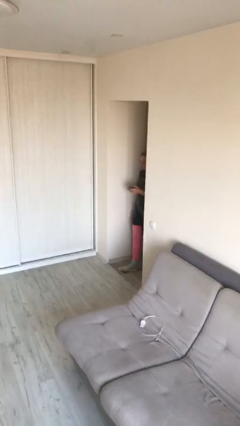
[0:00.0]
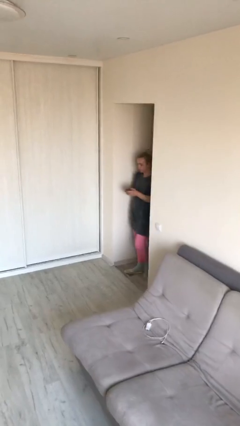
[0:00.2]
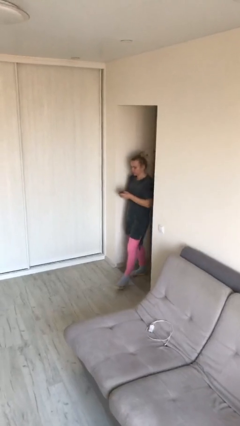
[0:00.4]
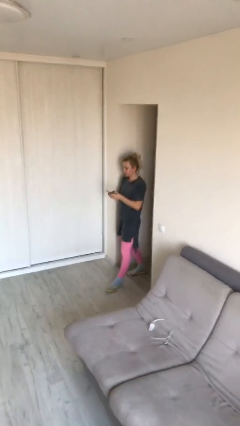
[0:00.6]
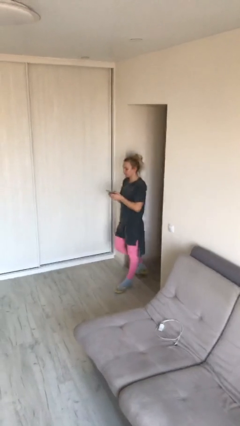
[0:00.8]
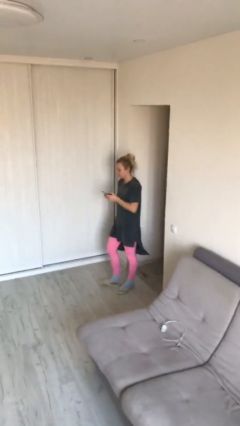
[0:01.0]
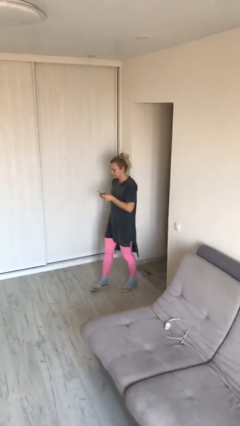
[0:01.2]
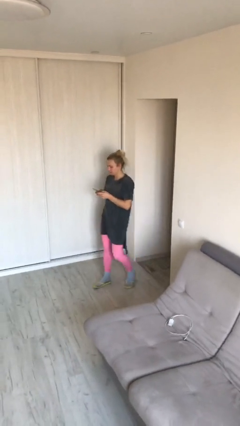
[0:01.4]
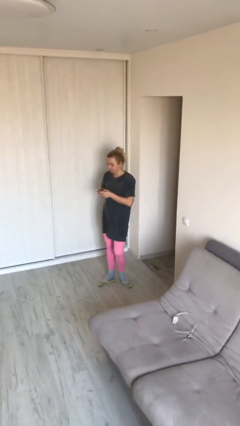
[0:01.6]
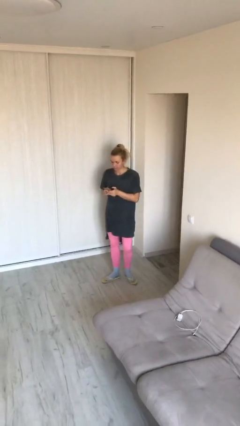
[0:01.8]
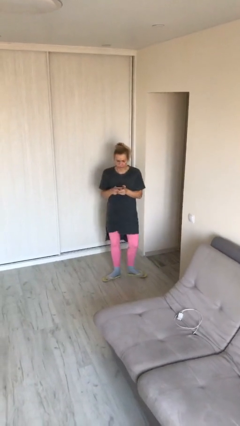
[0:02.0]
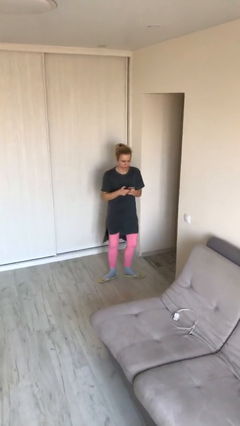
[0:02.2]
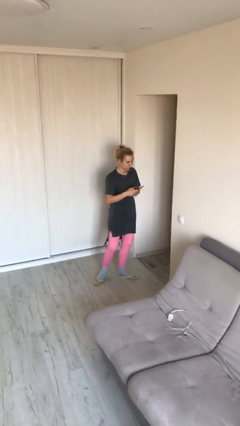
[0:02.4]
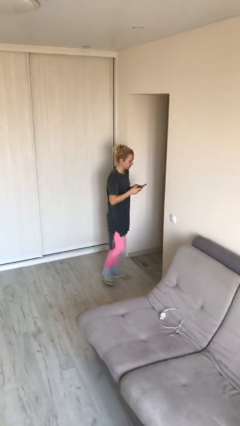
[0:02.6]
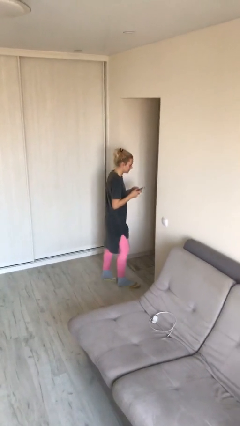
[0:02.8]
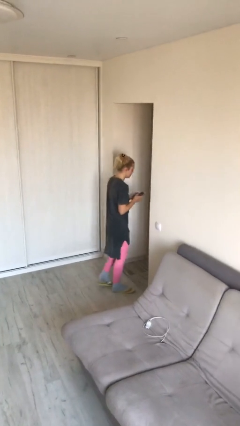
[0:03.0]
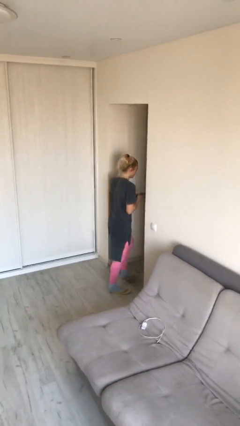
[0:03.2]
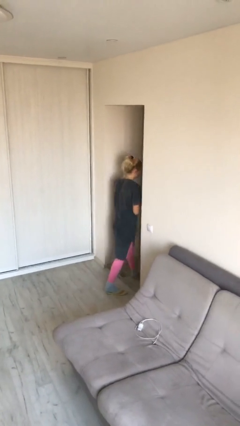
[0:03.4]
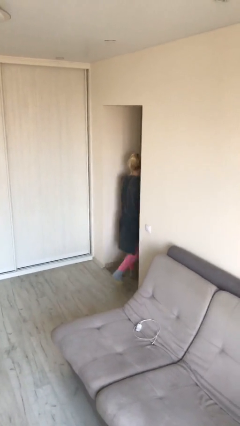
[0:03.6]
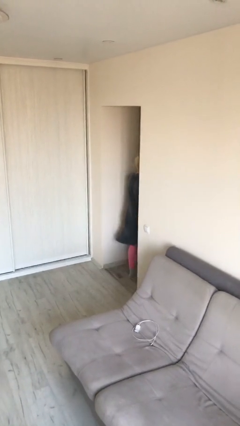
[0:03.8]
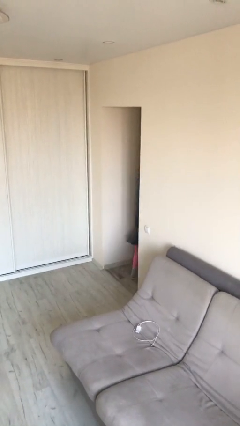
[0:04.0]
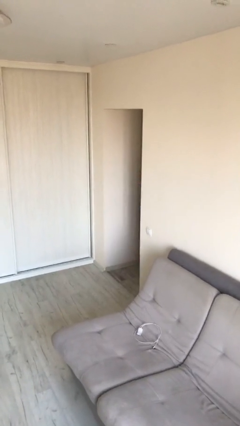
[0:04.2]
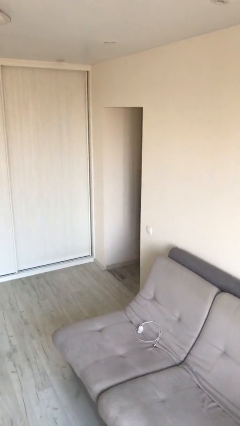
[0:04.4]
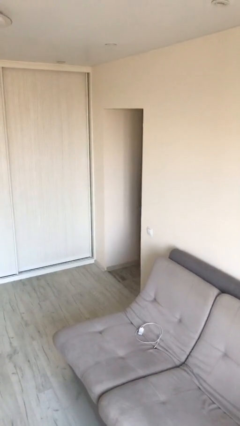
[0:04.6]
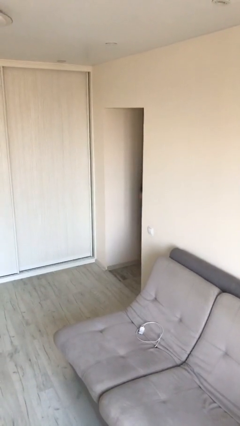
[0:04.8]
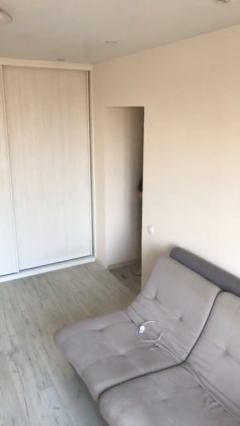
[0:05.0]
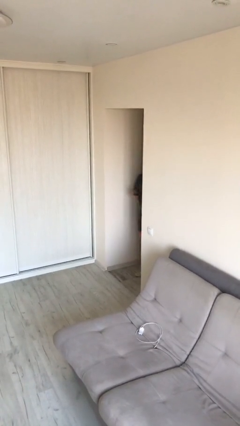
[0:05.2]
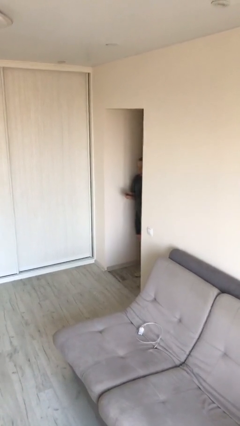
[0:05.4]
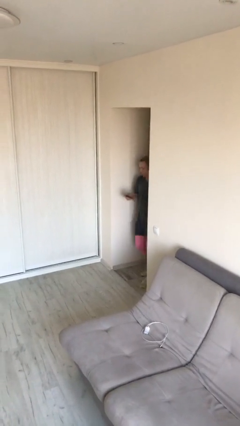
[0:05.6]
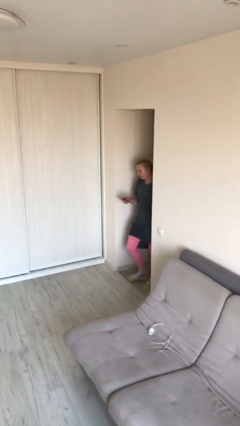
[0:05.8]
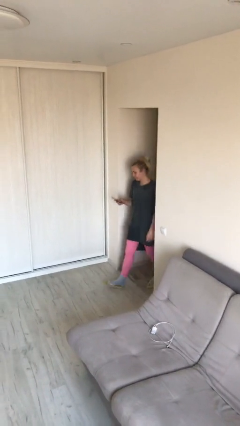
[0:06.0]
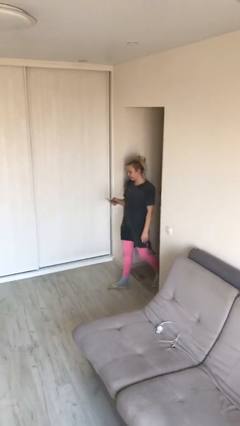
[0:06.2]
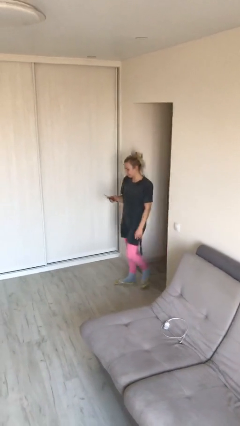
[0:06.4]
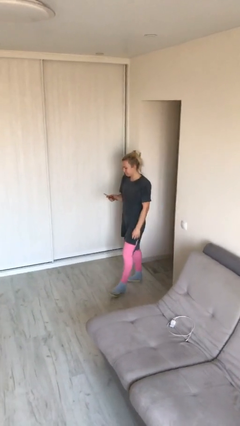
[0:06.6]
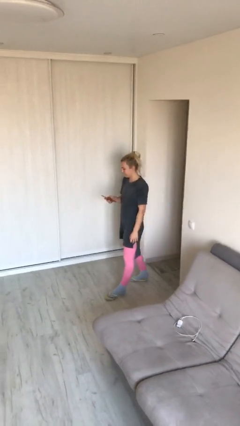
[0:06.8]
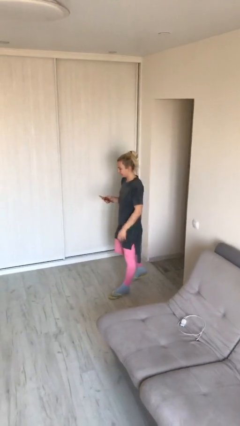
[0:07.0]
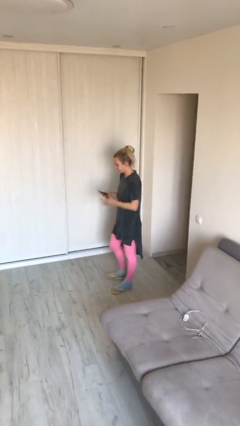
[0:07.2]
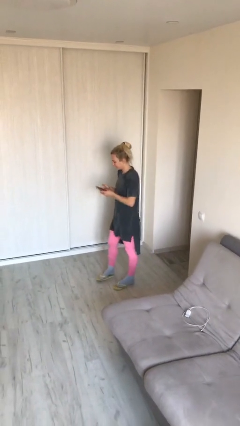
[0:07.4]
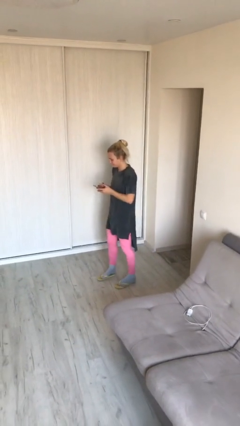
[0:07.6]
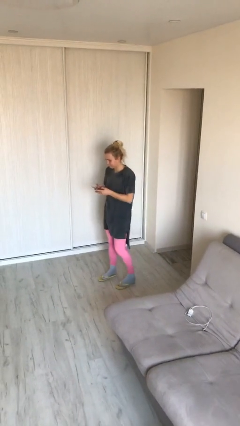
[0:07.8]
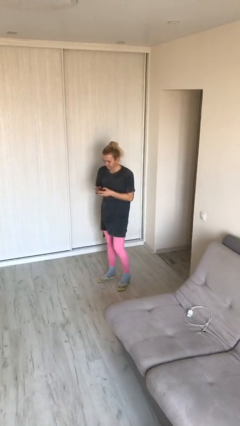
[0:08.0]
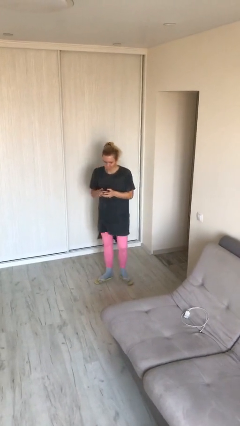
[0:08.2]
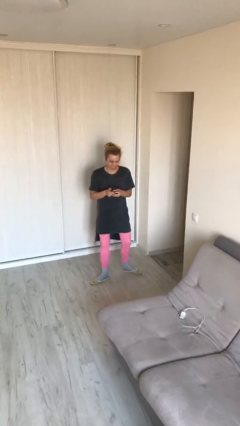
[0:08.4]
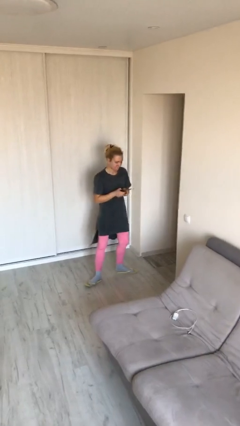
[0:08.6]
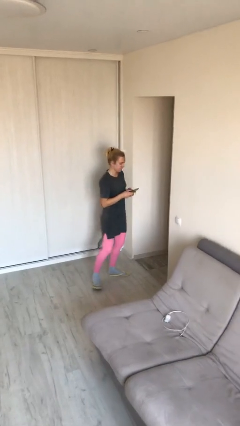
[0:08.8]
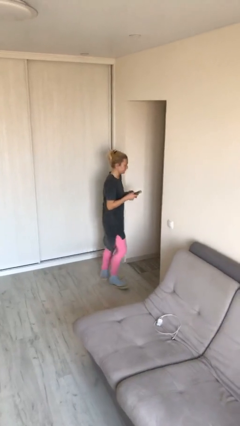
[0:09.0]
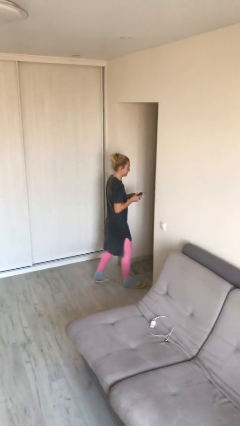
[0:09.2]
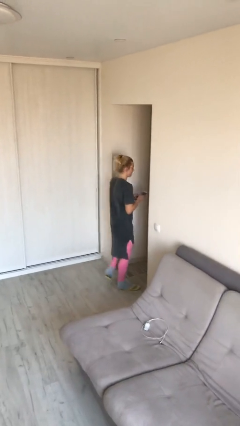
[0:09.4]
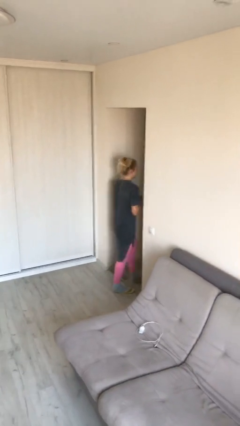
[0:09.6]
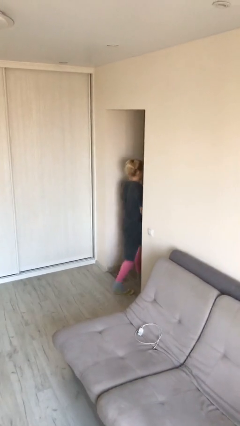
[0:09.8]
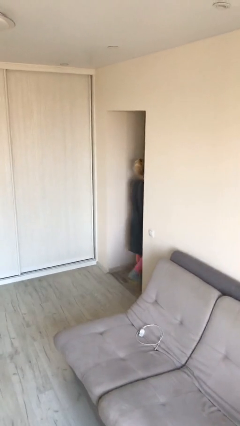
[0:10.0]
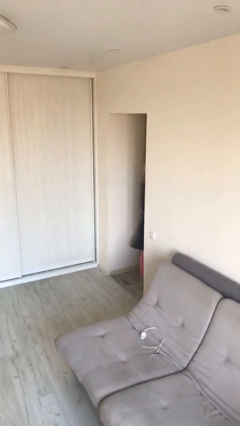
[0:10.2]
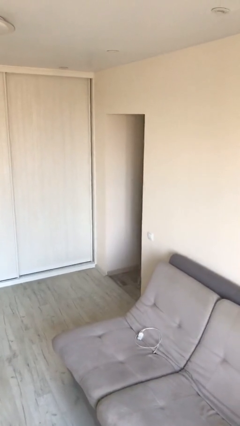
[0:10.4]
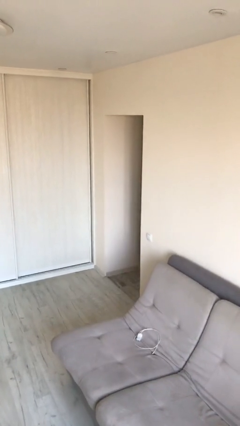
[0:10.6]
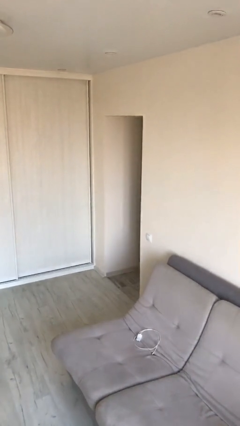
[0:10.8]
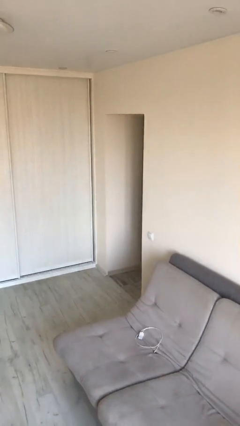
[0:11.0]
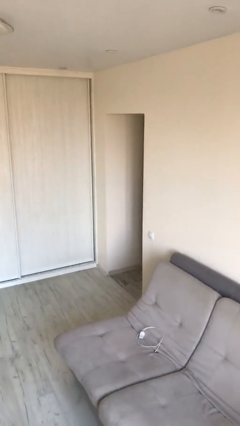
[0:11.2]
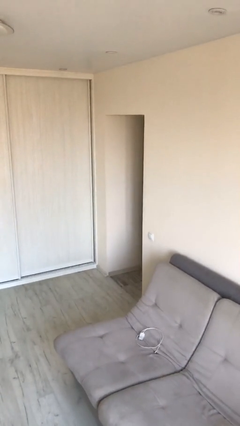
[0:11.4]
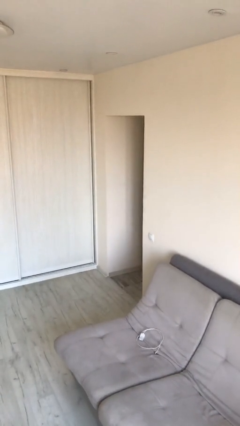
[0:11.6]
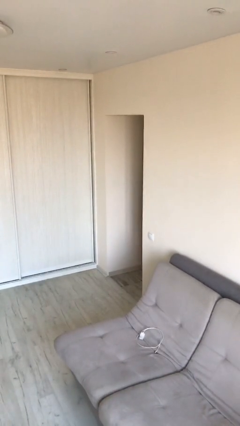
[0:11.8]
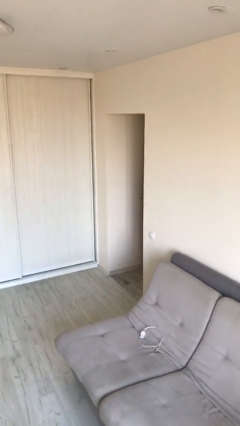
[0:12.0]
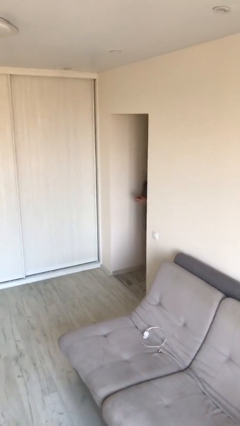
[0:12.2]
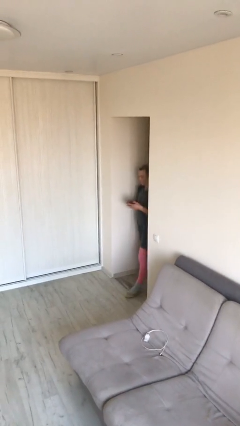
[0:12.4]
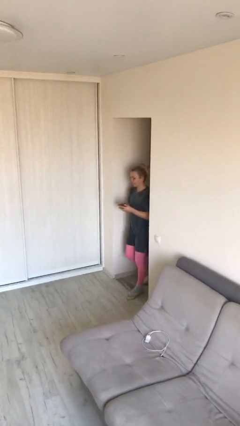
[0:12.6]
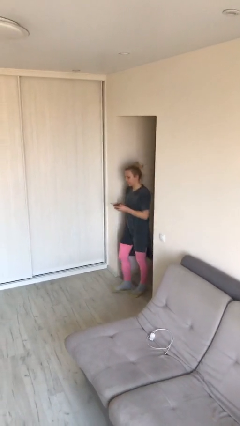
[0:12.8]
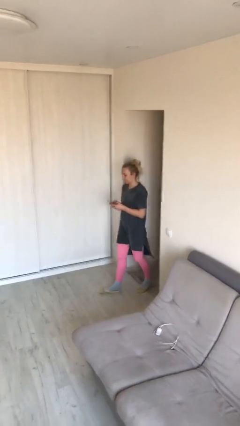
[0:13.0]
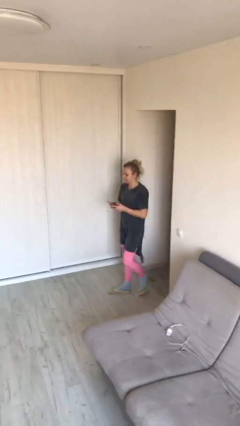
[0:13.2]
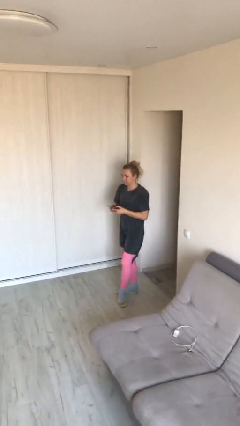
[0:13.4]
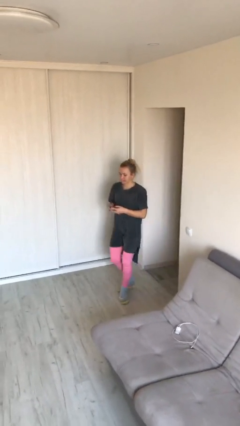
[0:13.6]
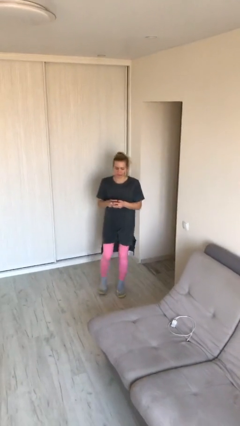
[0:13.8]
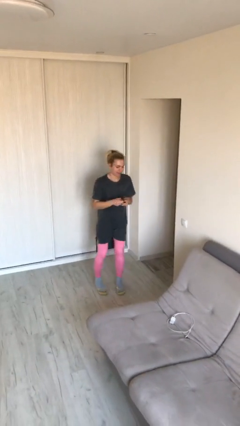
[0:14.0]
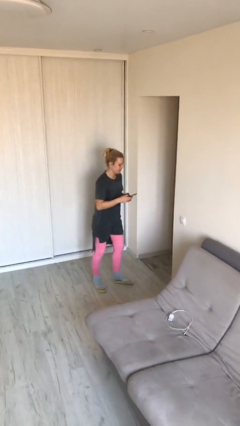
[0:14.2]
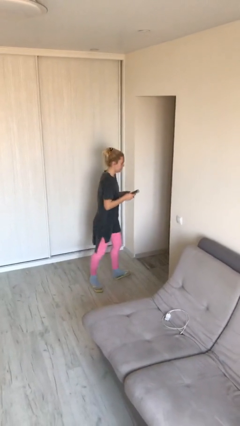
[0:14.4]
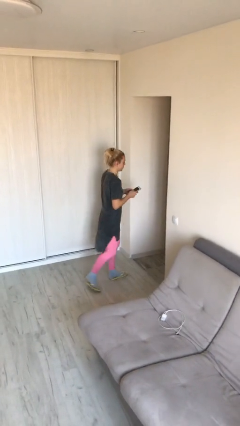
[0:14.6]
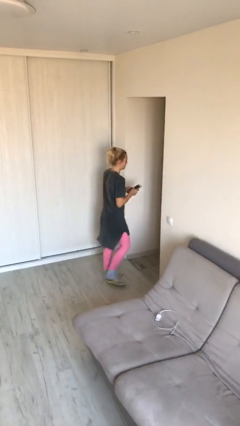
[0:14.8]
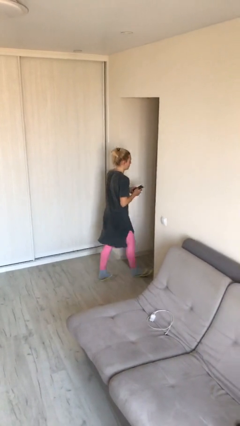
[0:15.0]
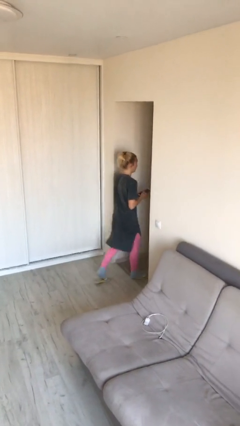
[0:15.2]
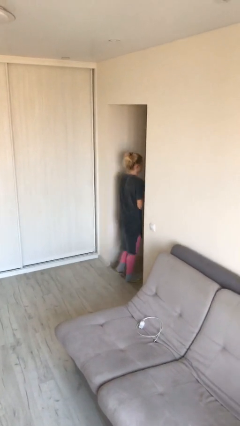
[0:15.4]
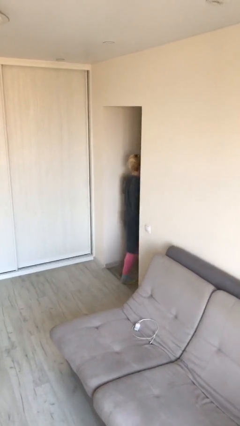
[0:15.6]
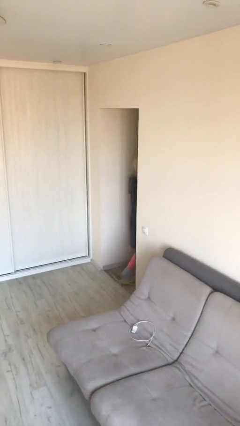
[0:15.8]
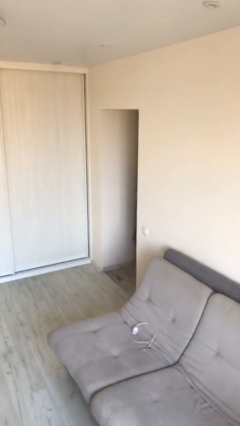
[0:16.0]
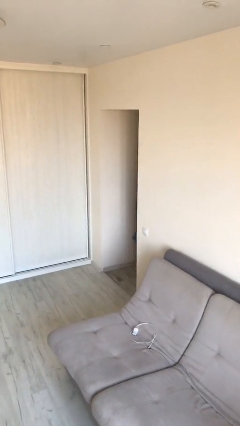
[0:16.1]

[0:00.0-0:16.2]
person texts on phone

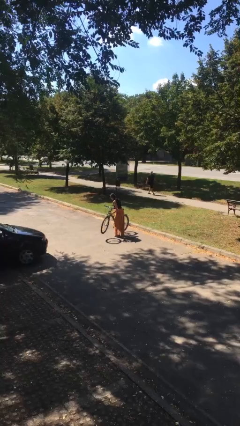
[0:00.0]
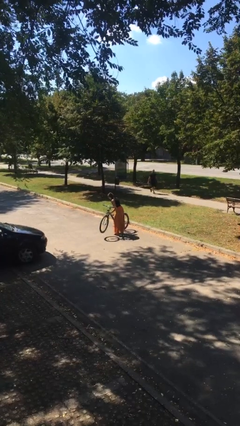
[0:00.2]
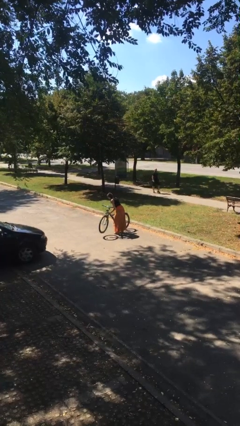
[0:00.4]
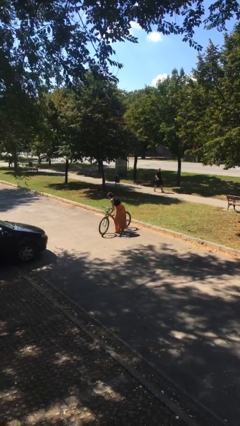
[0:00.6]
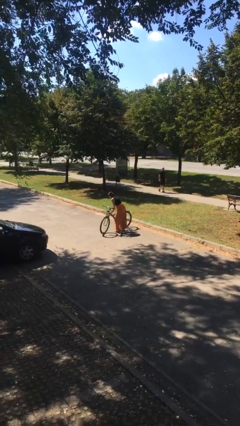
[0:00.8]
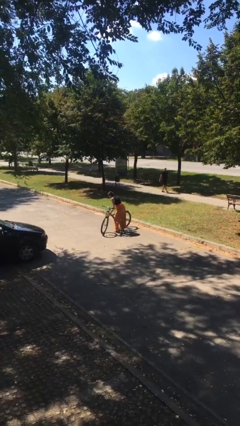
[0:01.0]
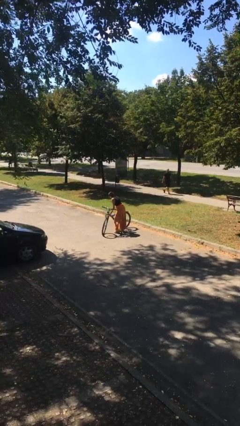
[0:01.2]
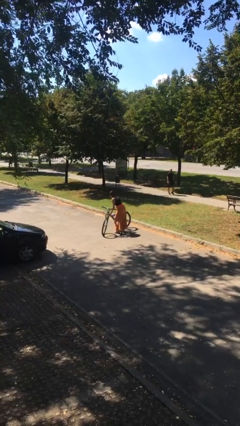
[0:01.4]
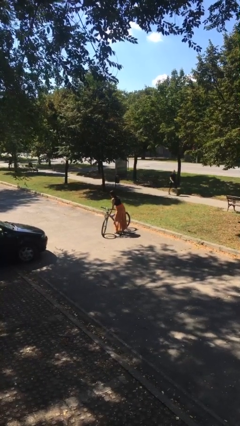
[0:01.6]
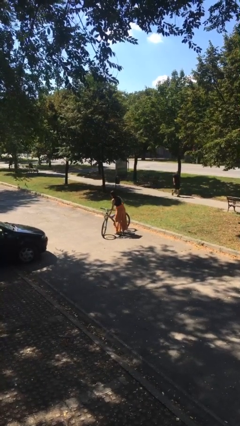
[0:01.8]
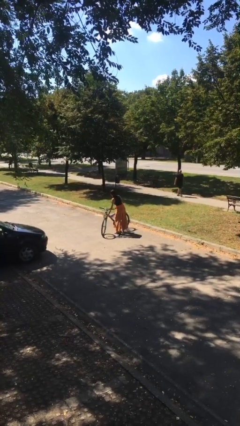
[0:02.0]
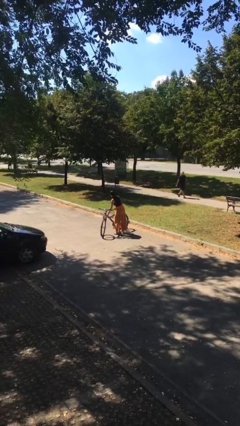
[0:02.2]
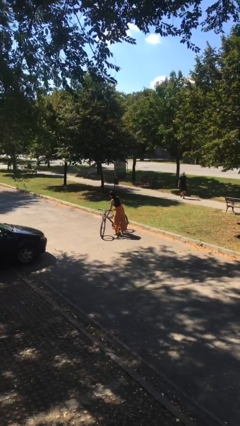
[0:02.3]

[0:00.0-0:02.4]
person puts down object on floor
